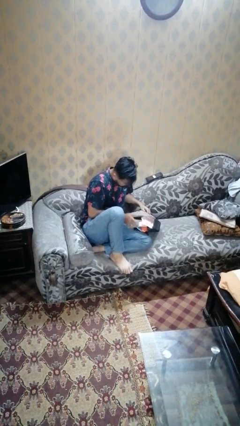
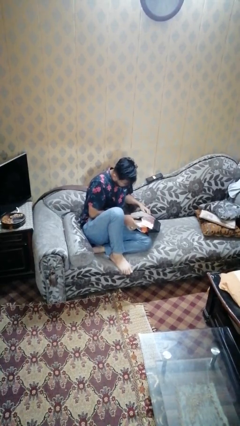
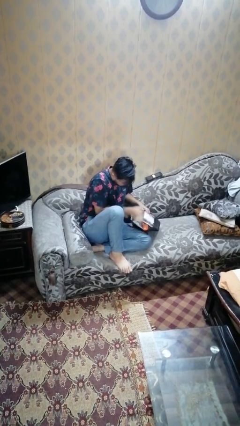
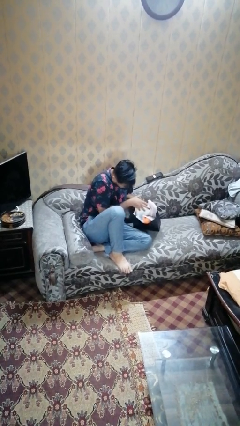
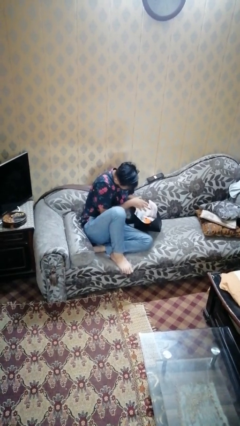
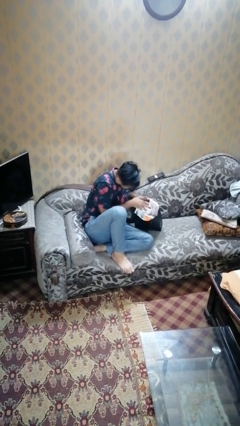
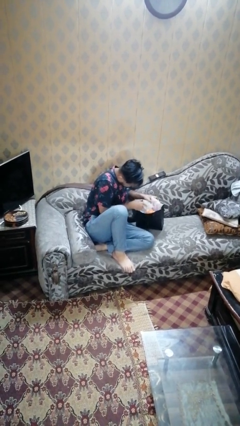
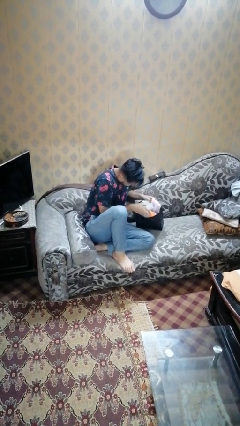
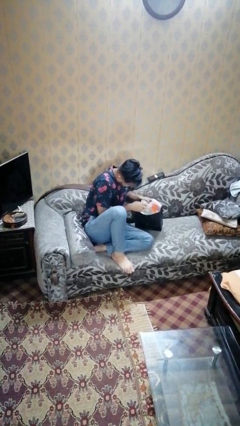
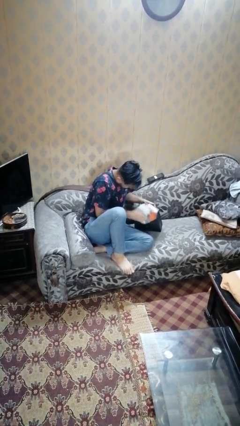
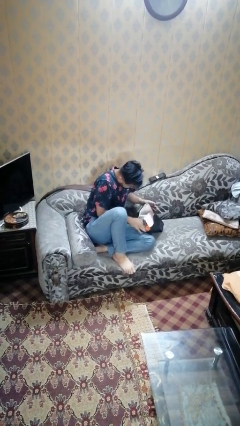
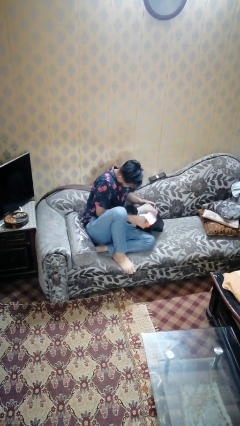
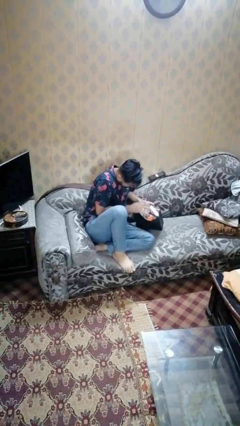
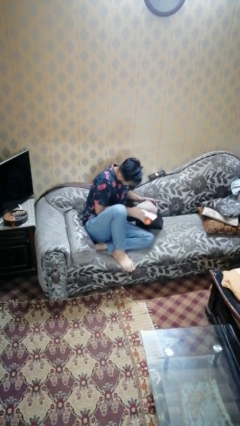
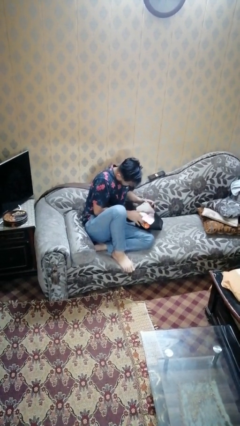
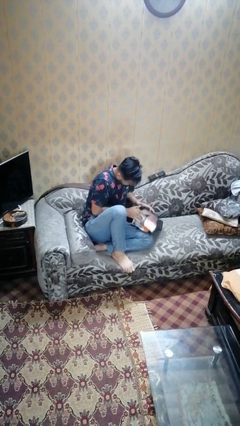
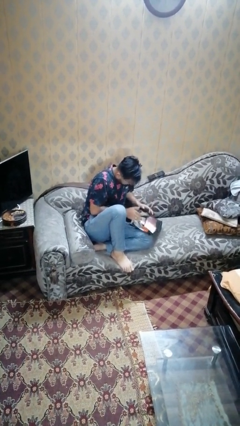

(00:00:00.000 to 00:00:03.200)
person searches in bag

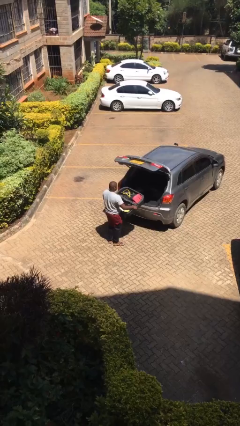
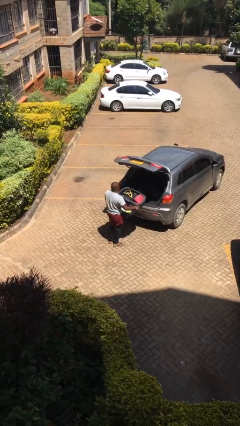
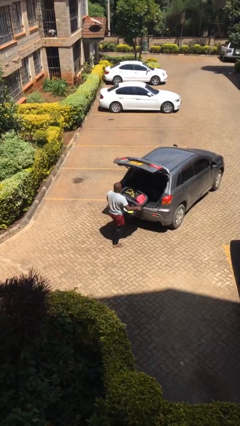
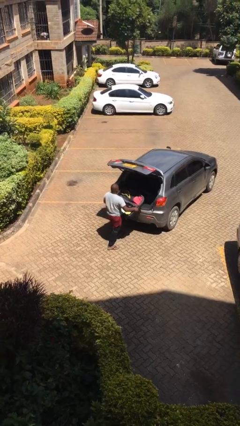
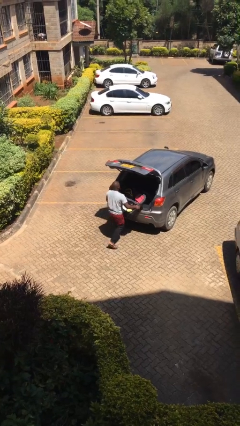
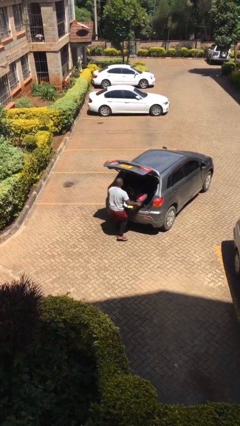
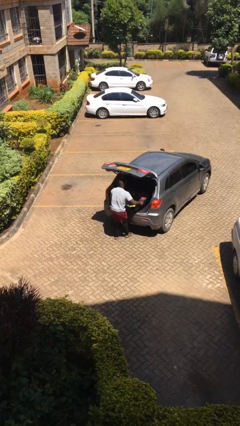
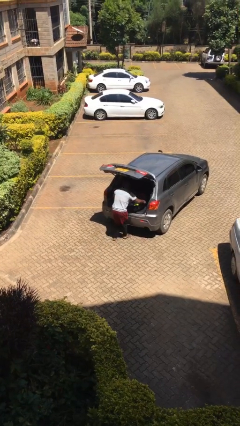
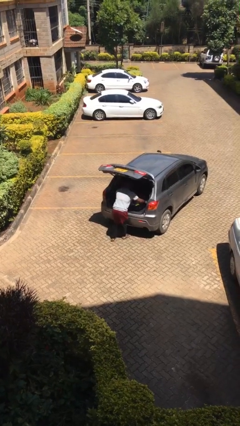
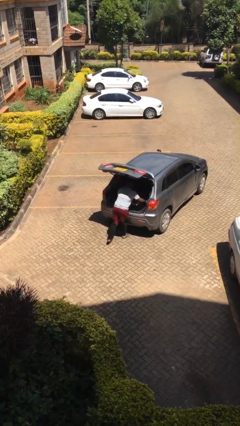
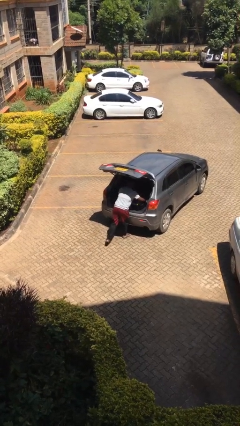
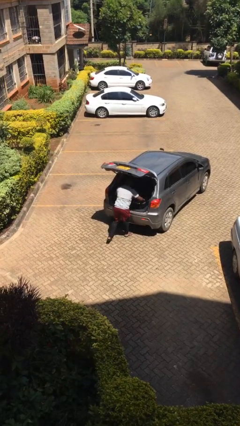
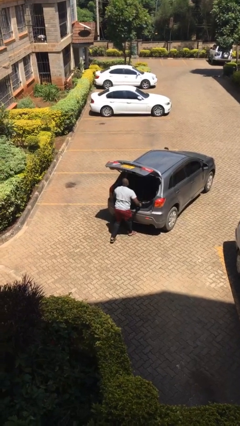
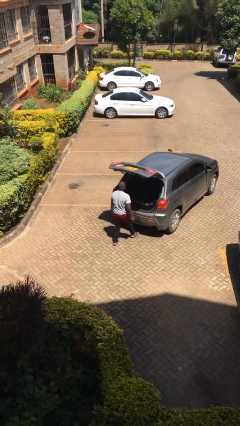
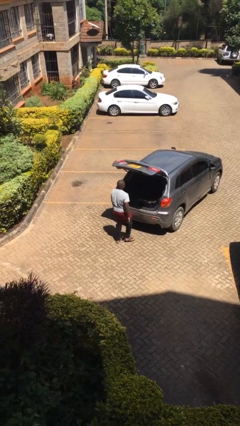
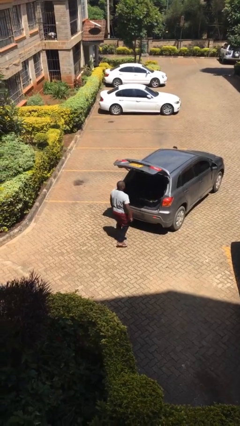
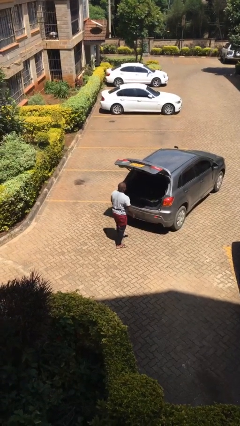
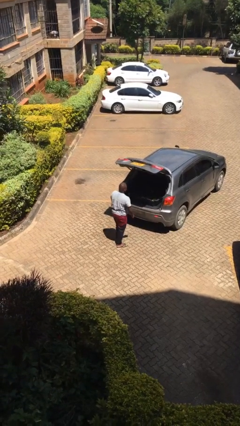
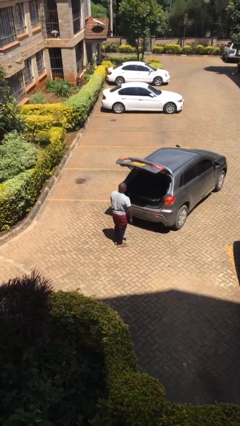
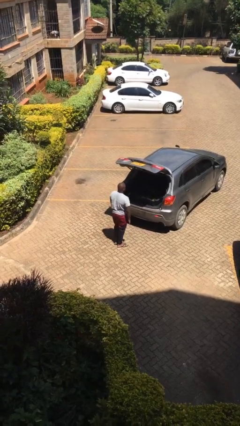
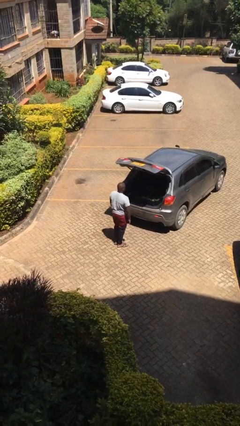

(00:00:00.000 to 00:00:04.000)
person loads car

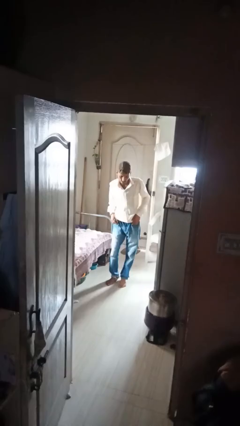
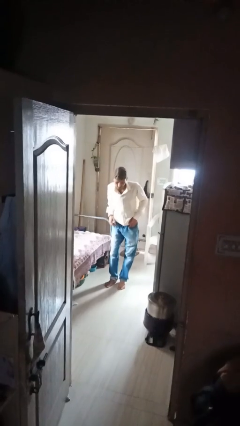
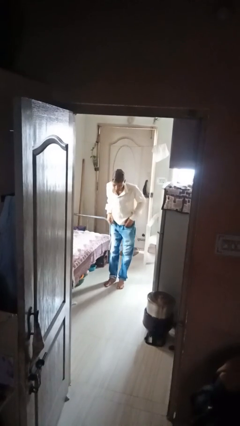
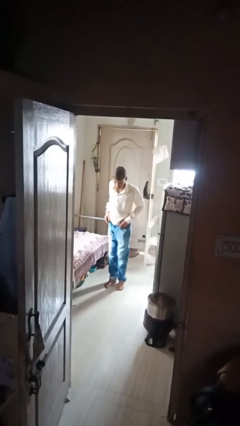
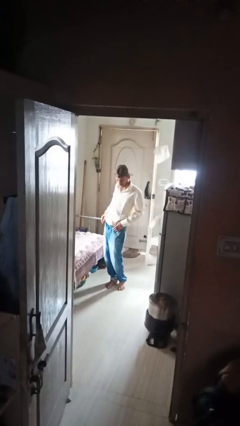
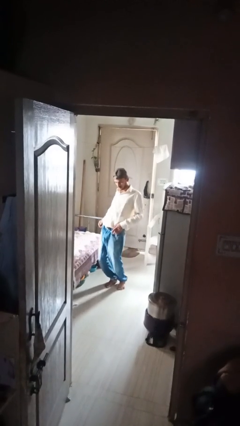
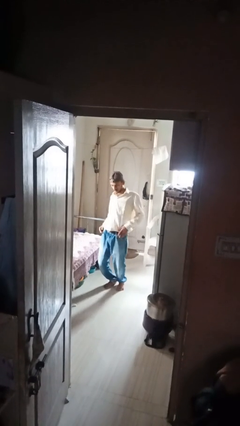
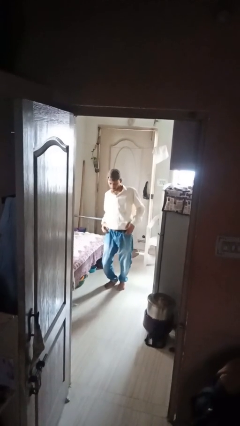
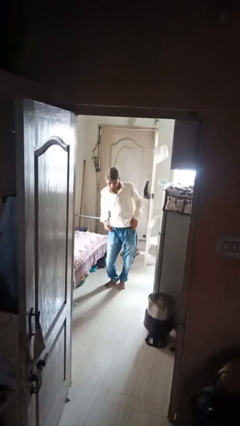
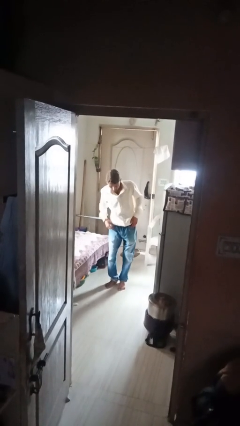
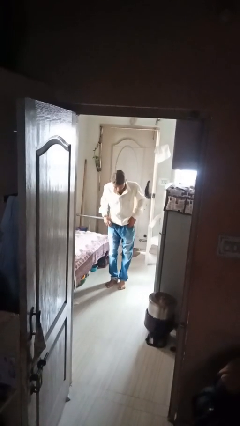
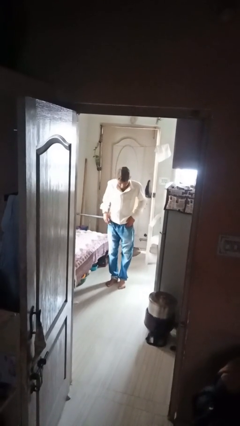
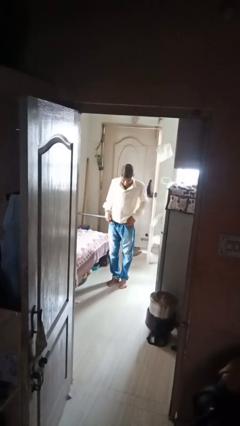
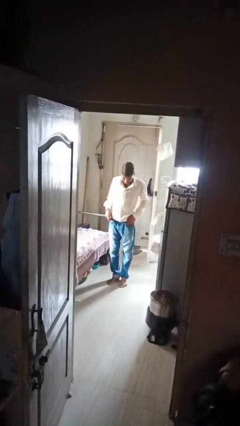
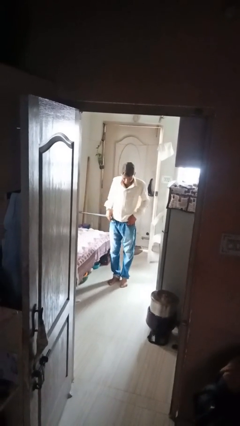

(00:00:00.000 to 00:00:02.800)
person wiggles hips

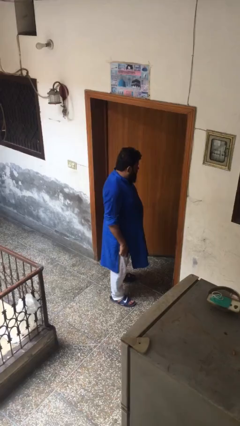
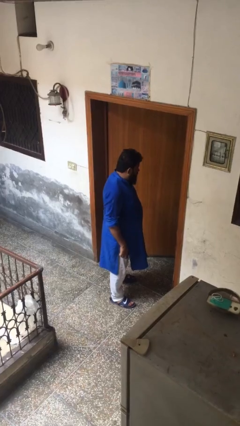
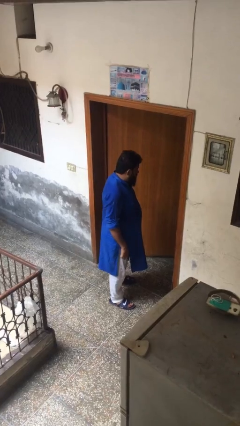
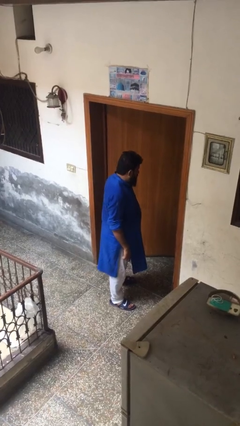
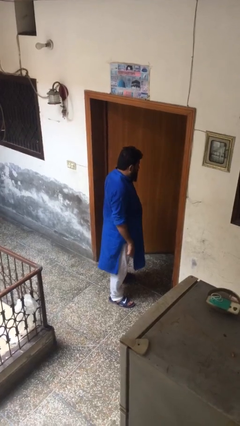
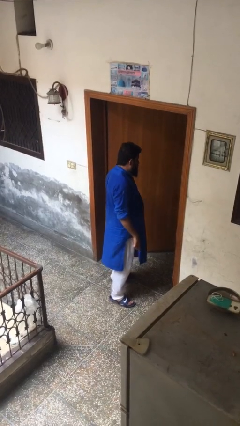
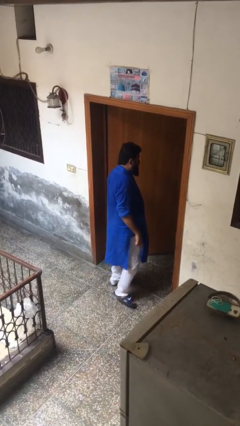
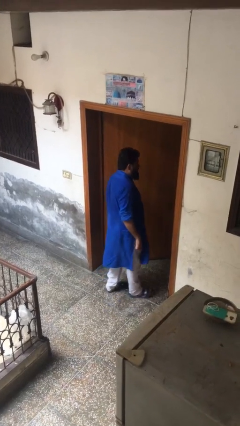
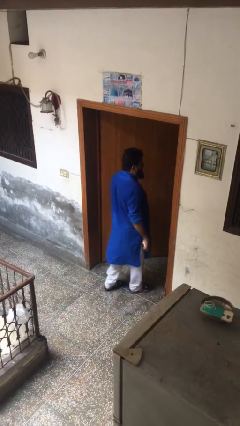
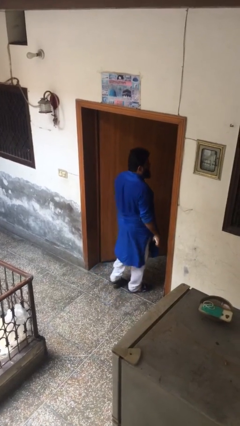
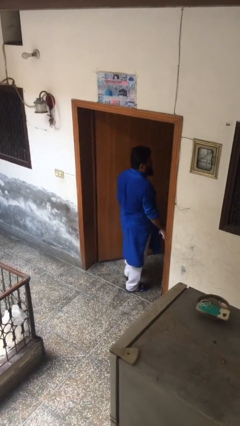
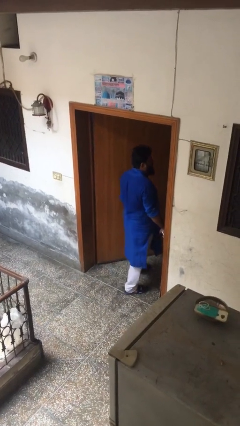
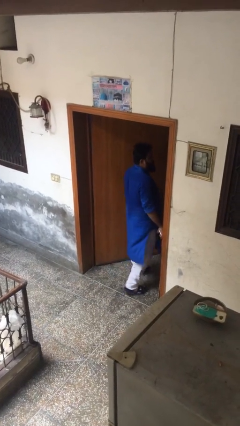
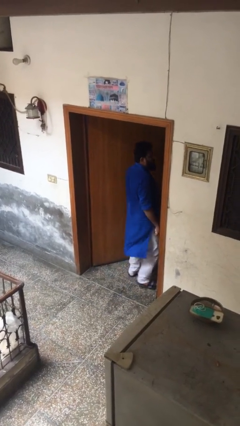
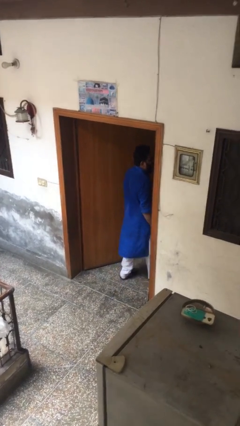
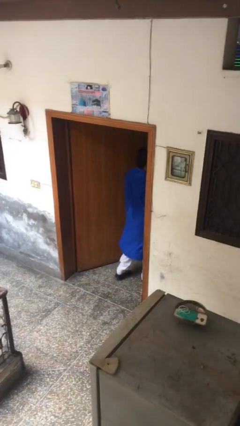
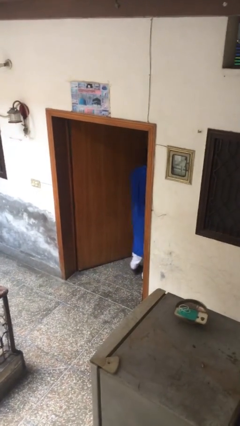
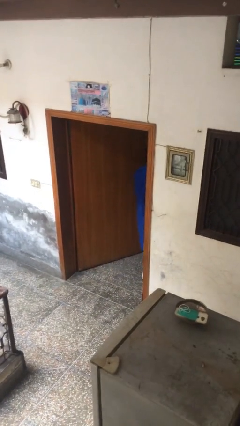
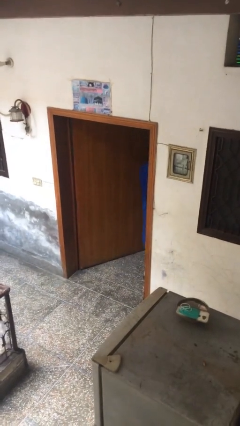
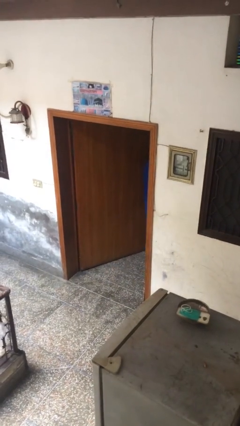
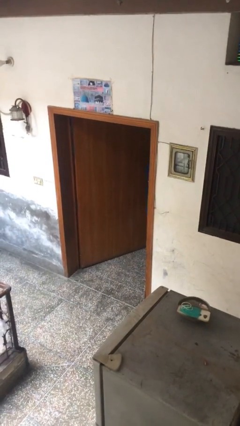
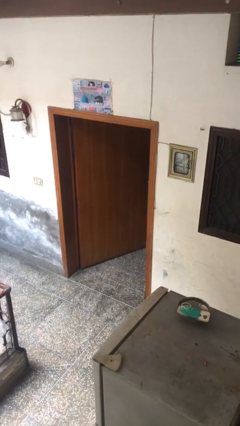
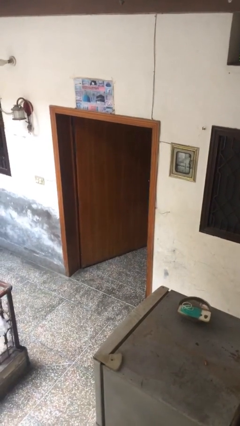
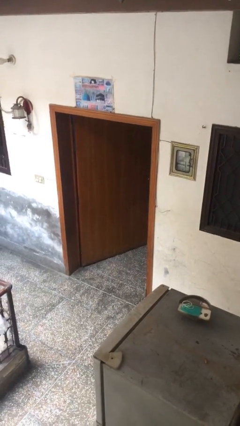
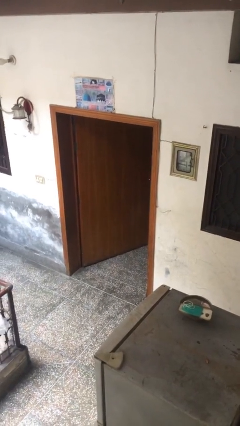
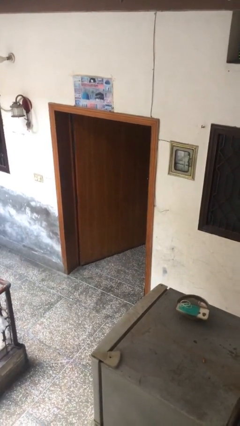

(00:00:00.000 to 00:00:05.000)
person exits scene through structure

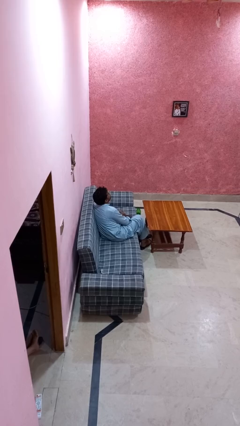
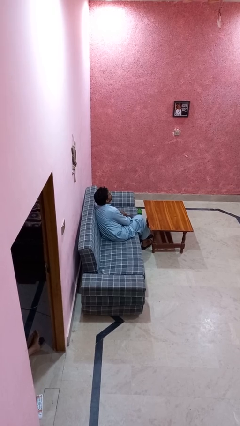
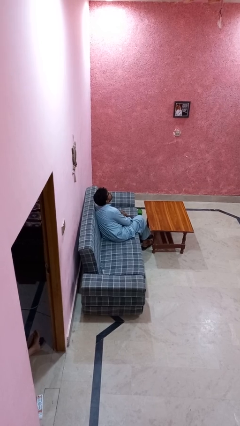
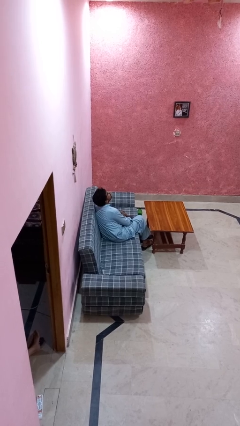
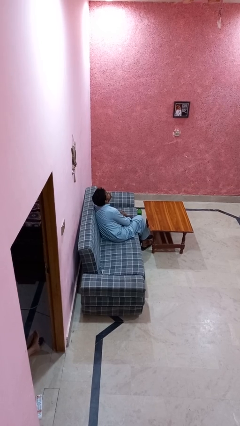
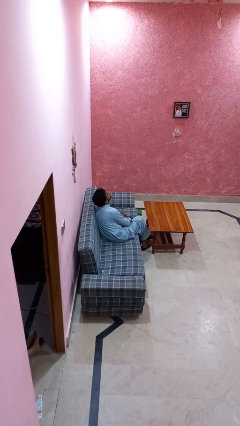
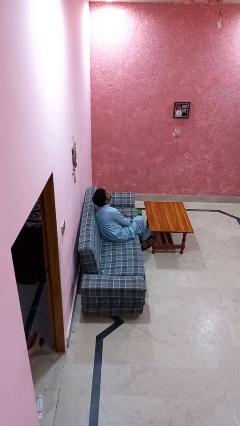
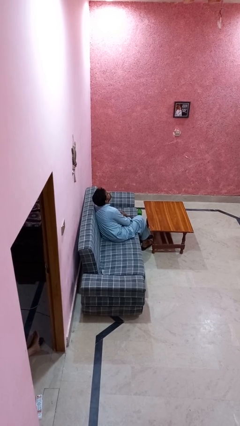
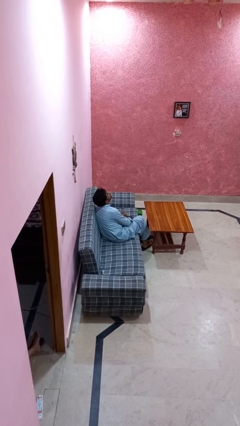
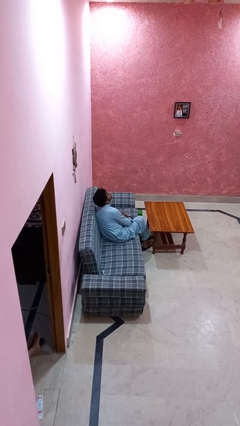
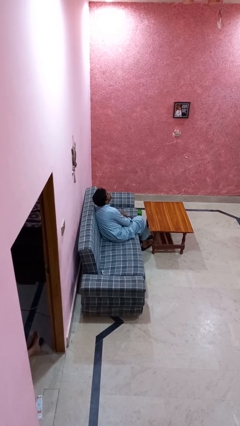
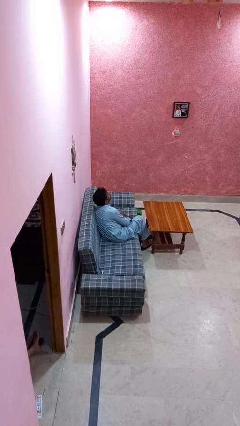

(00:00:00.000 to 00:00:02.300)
person sticks out tongue

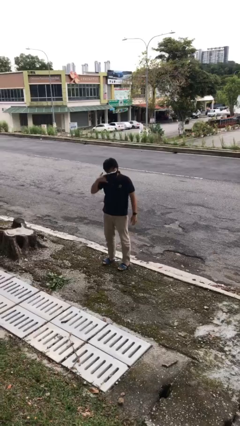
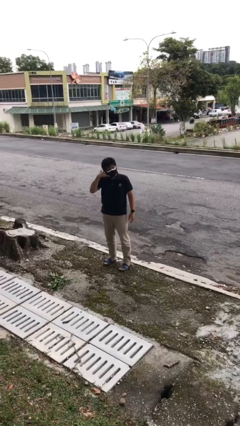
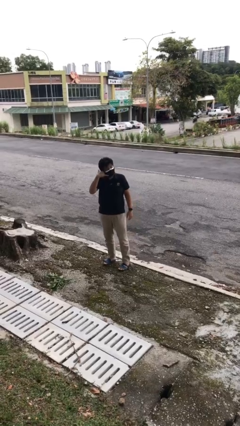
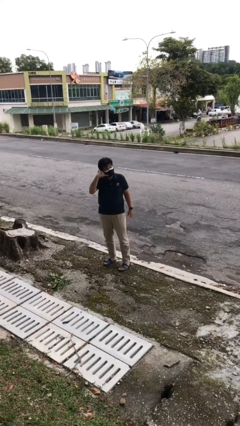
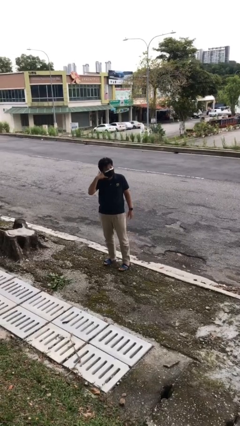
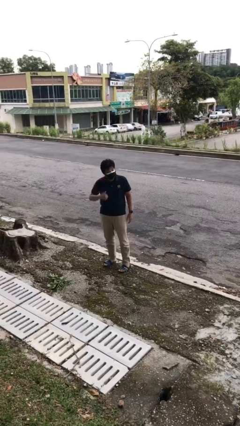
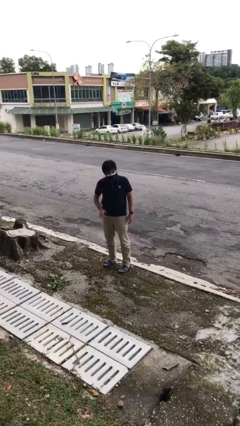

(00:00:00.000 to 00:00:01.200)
person gestures call me
